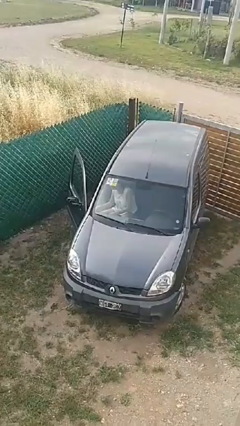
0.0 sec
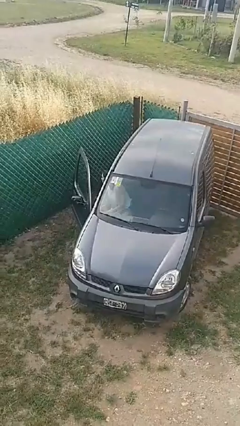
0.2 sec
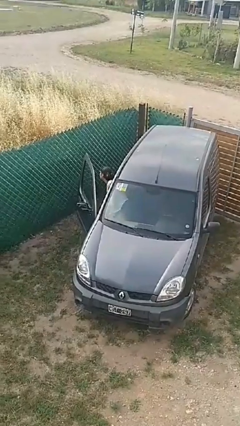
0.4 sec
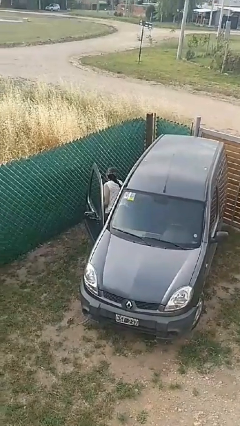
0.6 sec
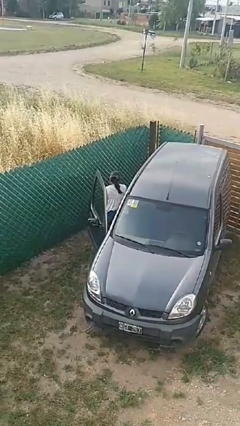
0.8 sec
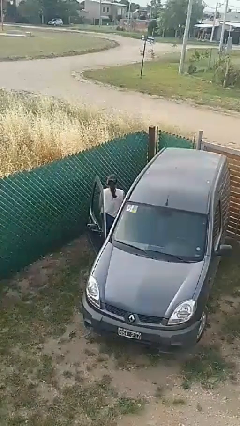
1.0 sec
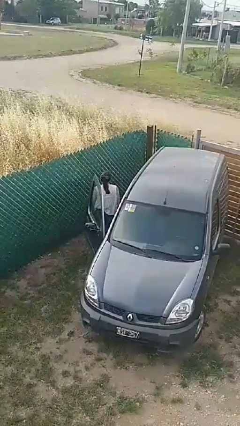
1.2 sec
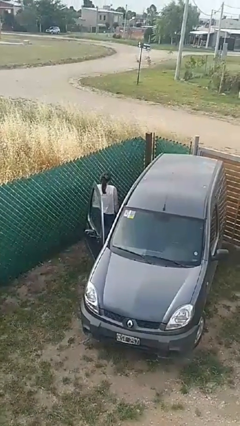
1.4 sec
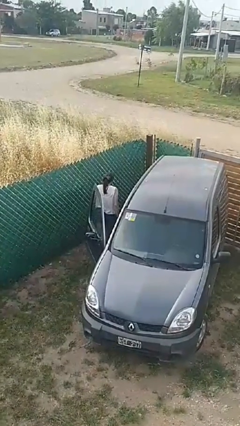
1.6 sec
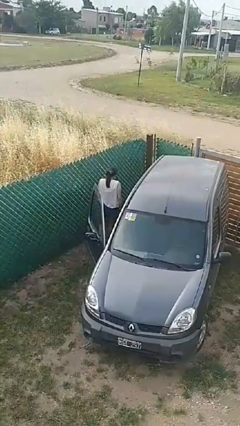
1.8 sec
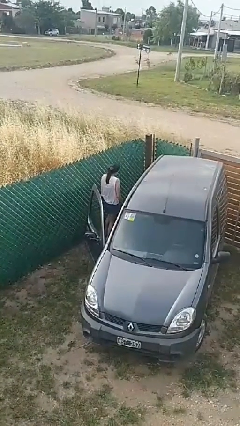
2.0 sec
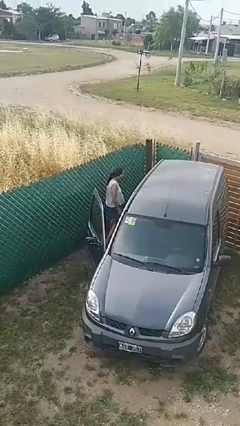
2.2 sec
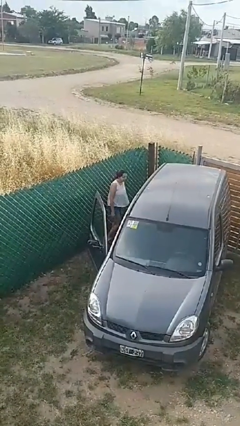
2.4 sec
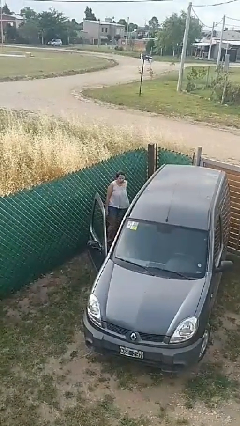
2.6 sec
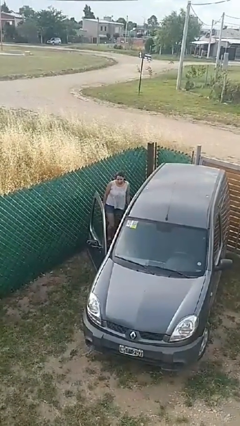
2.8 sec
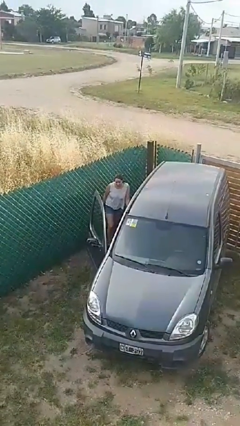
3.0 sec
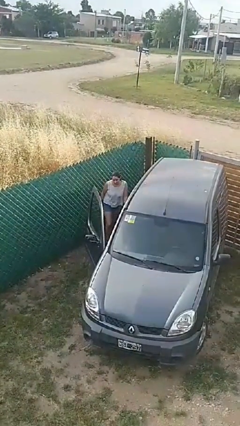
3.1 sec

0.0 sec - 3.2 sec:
person exits car

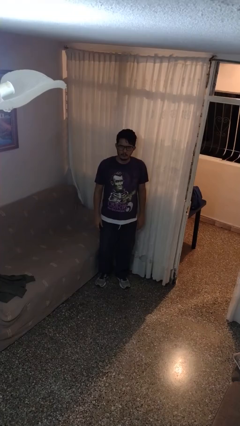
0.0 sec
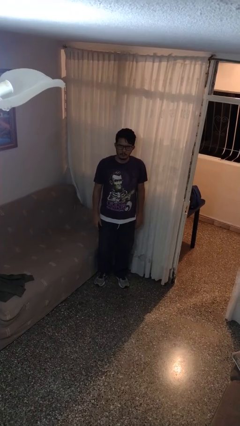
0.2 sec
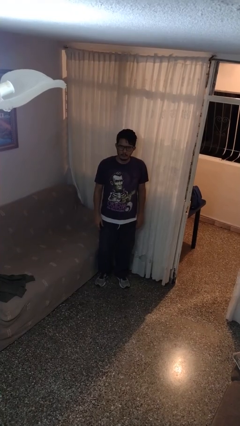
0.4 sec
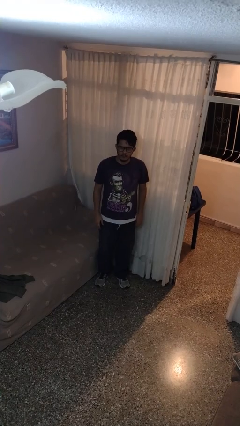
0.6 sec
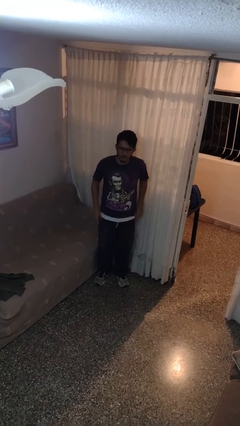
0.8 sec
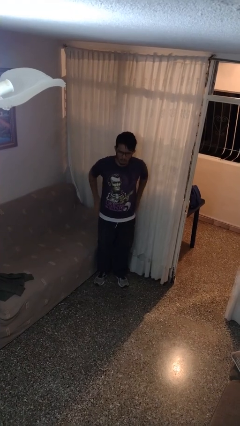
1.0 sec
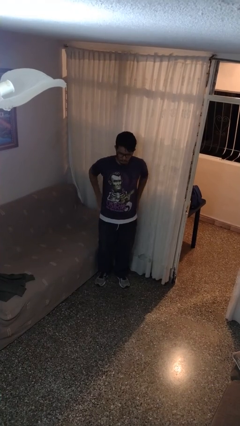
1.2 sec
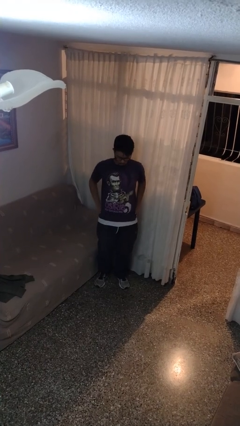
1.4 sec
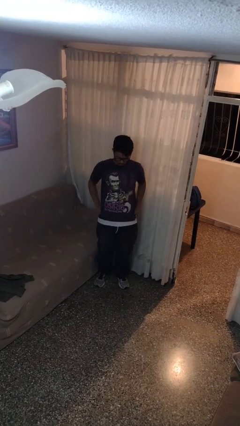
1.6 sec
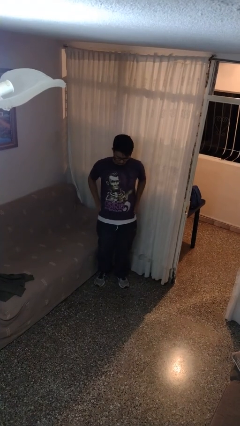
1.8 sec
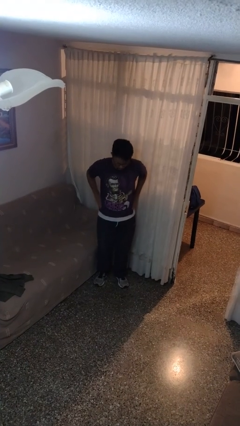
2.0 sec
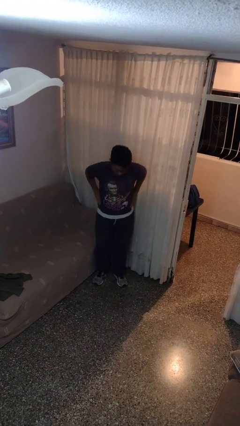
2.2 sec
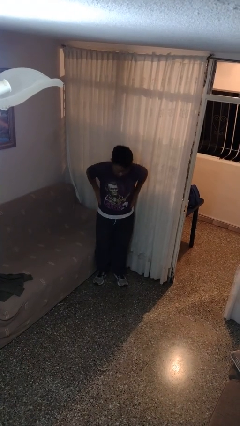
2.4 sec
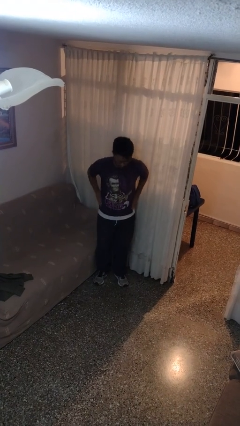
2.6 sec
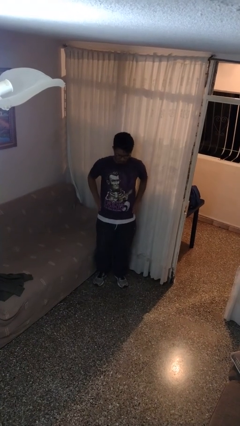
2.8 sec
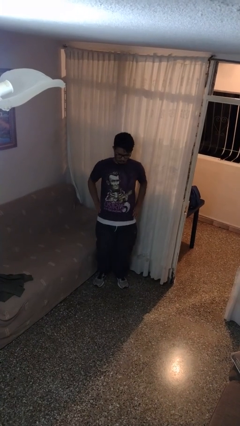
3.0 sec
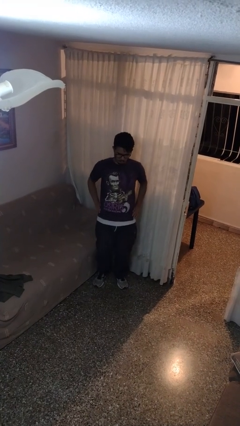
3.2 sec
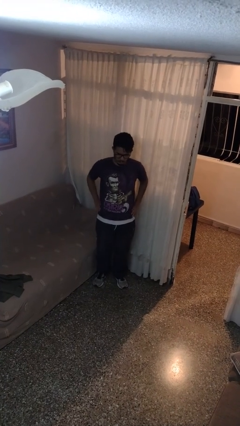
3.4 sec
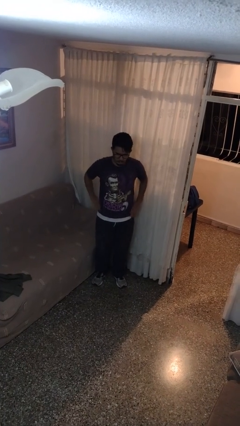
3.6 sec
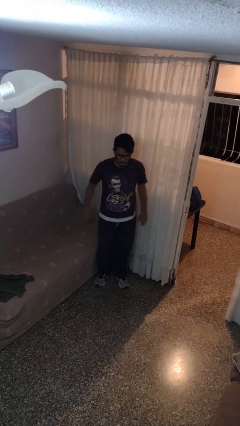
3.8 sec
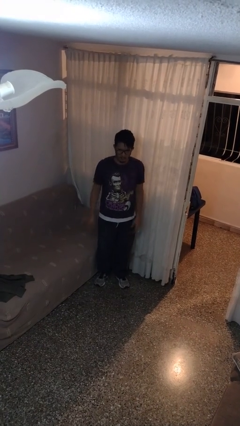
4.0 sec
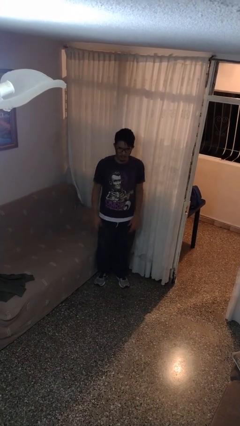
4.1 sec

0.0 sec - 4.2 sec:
person wiggles hips

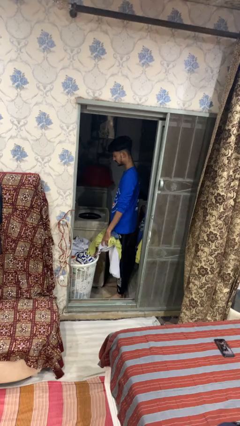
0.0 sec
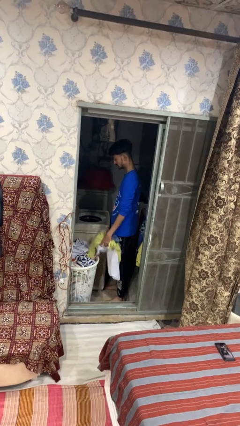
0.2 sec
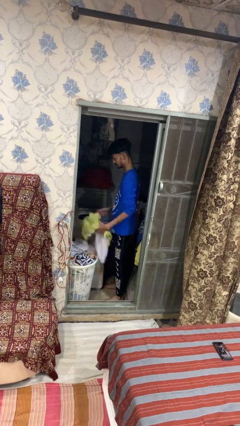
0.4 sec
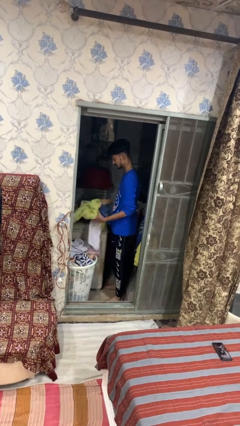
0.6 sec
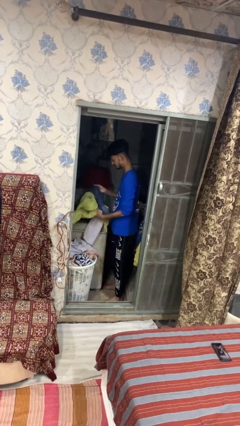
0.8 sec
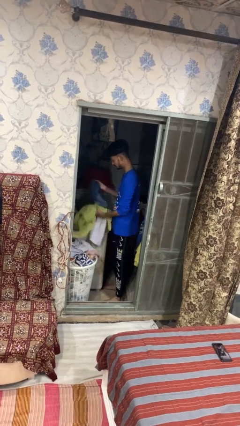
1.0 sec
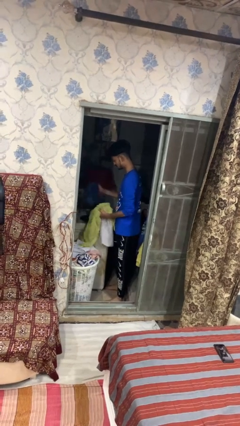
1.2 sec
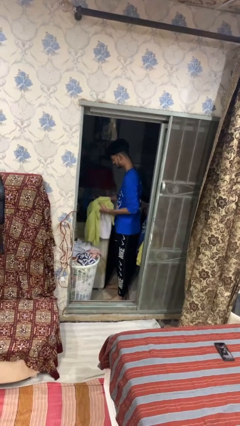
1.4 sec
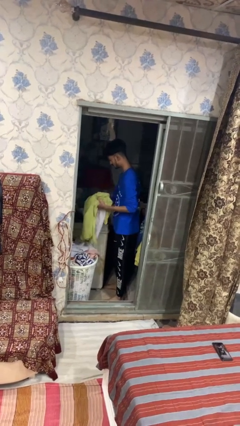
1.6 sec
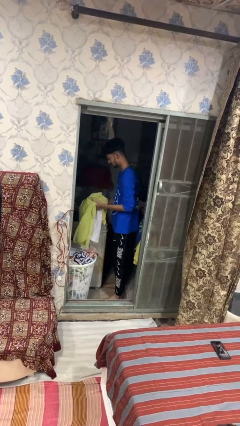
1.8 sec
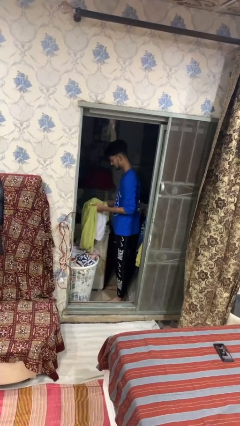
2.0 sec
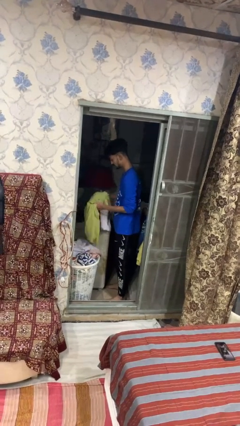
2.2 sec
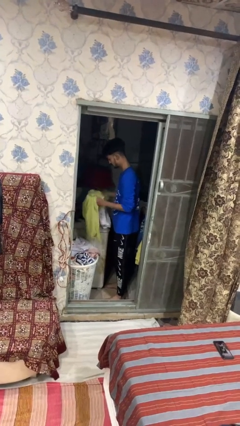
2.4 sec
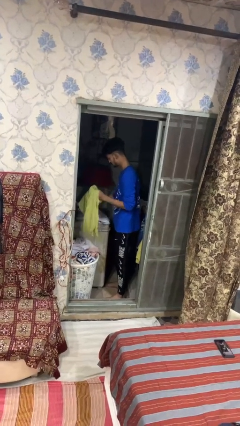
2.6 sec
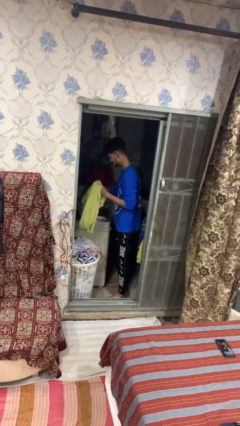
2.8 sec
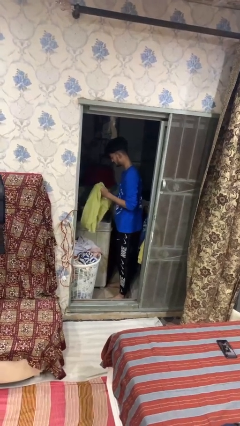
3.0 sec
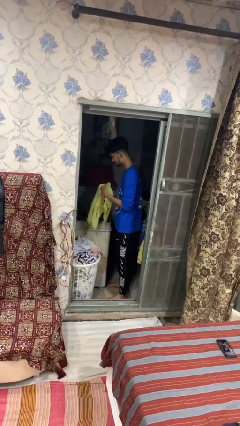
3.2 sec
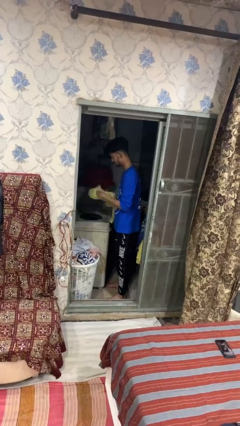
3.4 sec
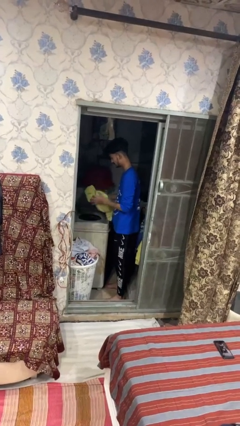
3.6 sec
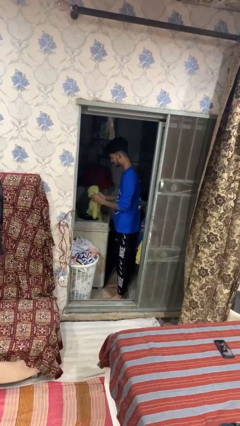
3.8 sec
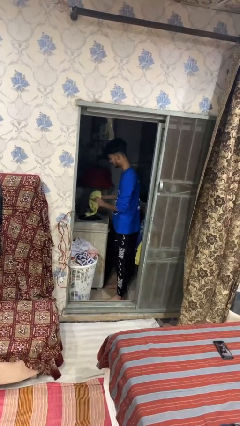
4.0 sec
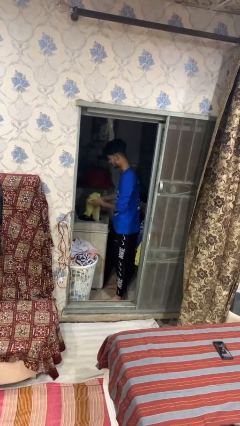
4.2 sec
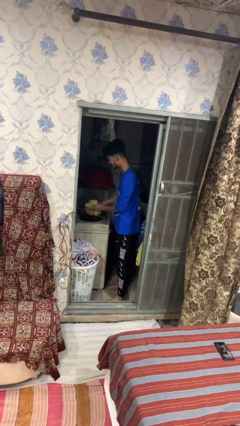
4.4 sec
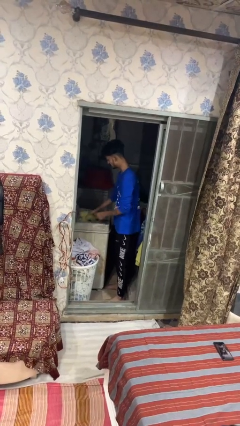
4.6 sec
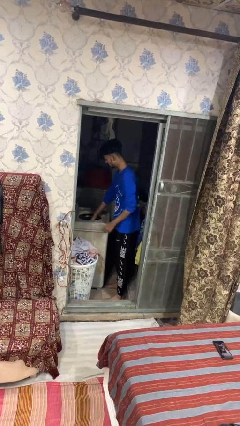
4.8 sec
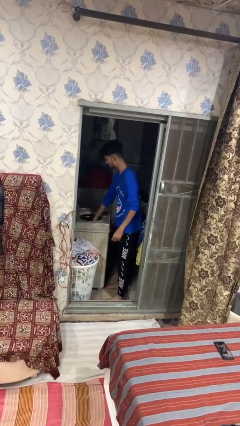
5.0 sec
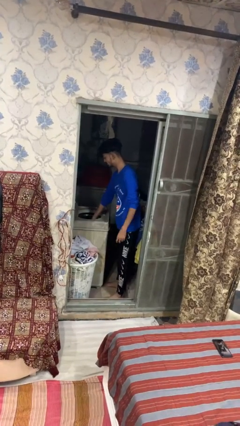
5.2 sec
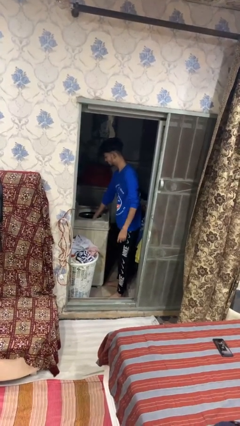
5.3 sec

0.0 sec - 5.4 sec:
person loads dryer

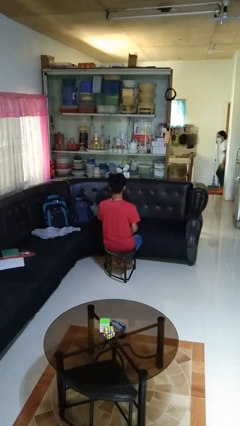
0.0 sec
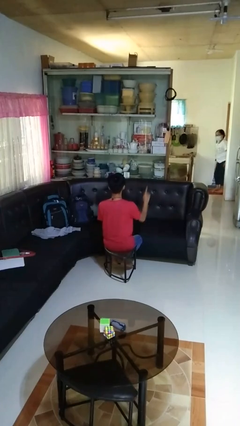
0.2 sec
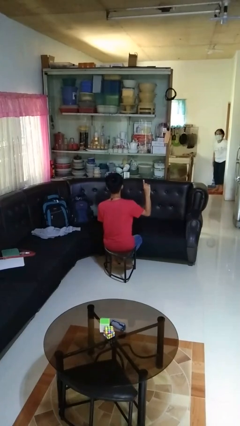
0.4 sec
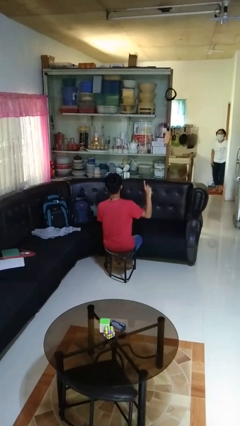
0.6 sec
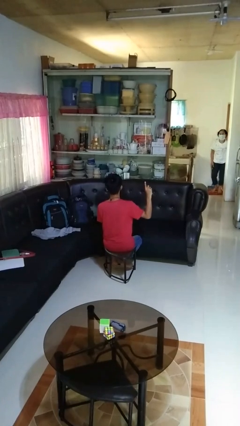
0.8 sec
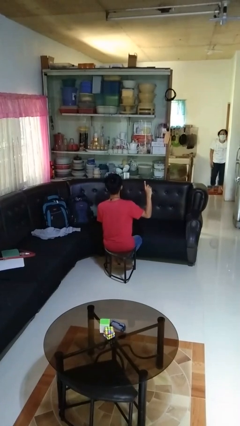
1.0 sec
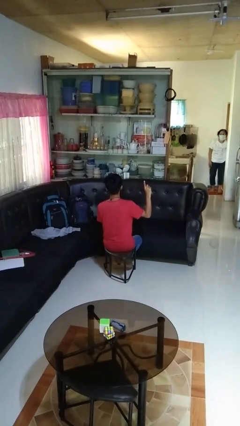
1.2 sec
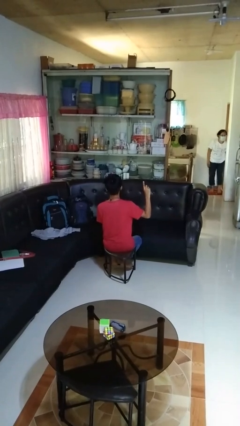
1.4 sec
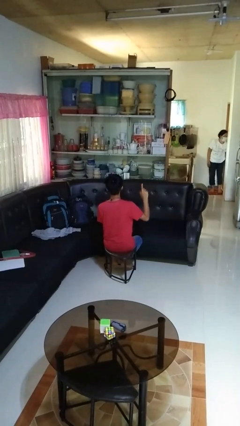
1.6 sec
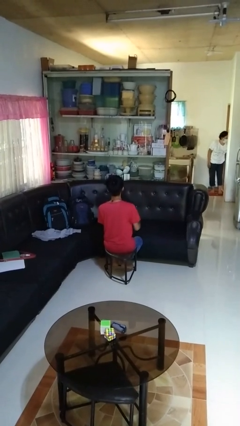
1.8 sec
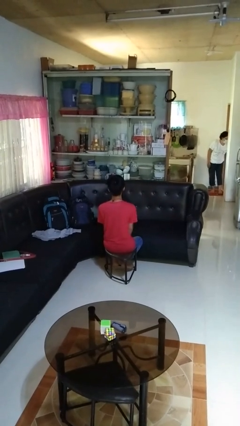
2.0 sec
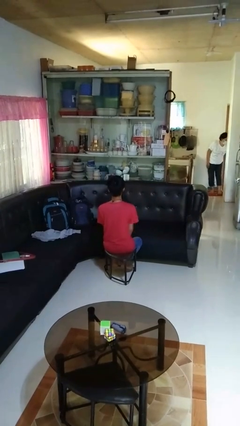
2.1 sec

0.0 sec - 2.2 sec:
person gestures number one

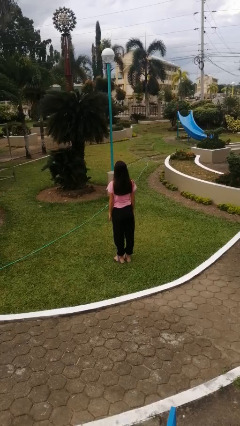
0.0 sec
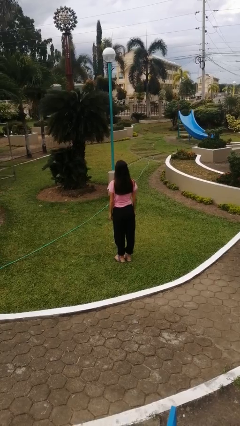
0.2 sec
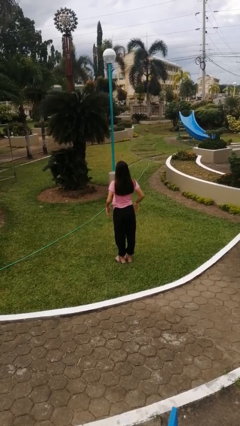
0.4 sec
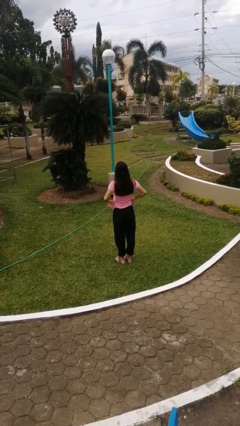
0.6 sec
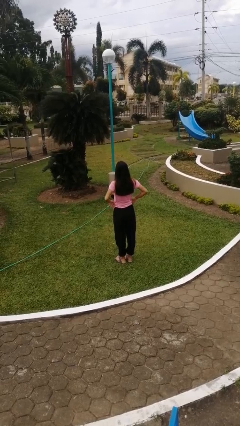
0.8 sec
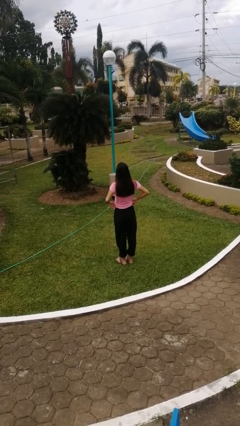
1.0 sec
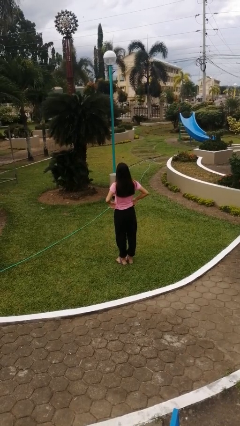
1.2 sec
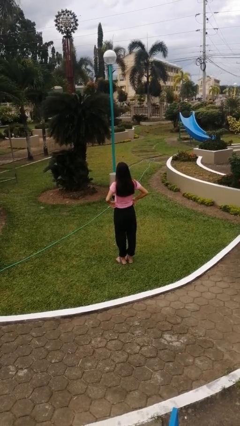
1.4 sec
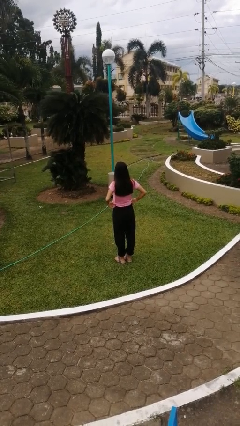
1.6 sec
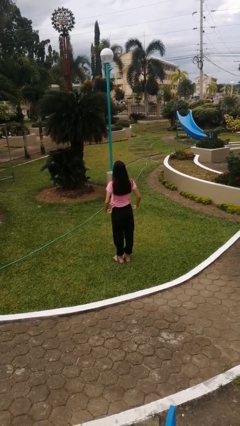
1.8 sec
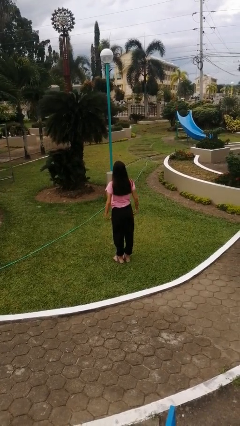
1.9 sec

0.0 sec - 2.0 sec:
person hikes up pants

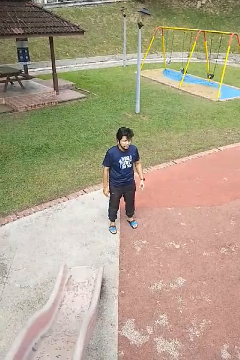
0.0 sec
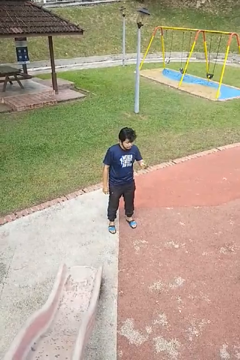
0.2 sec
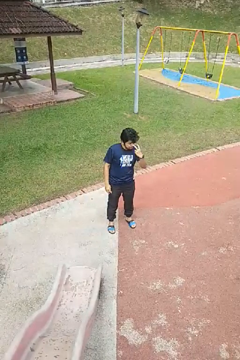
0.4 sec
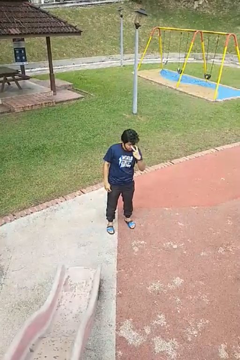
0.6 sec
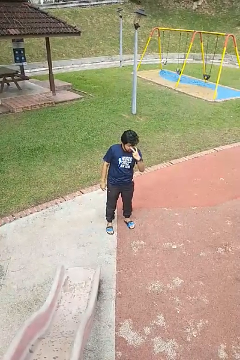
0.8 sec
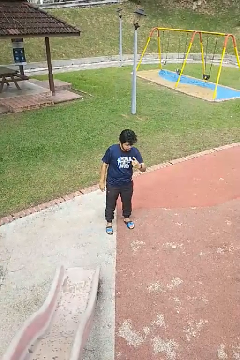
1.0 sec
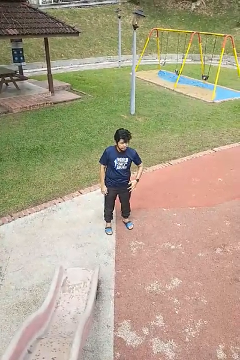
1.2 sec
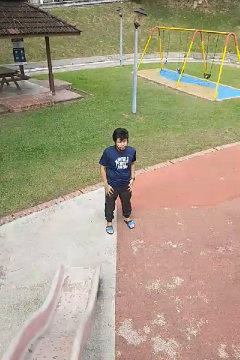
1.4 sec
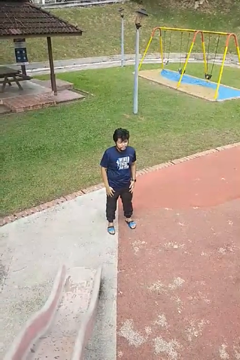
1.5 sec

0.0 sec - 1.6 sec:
person gestures watch closely
